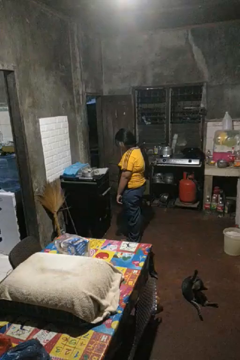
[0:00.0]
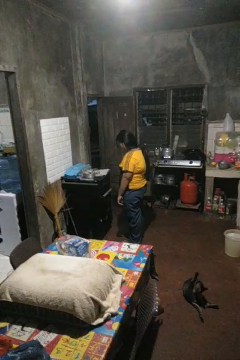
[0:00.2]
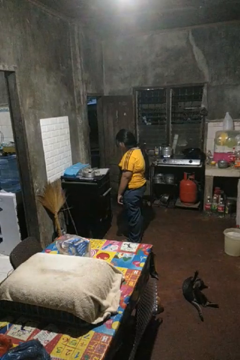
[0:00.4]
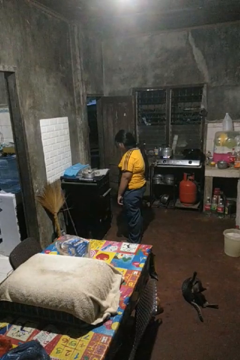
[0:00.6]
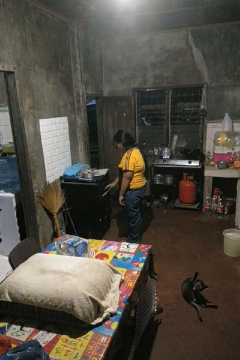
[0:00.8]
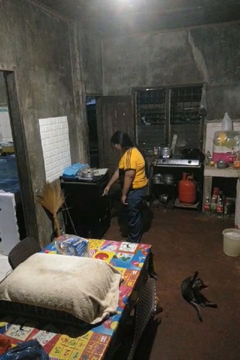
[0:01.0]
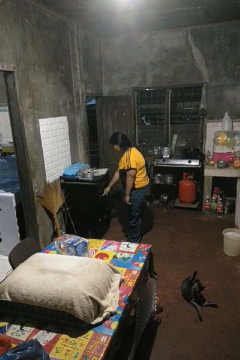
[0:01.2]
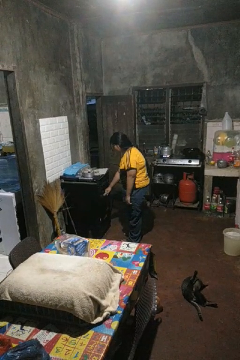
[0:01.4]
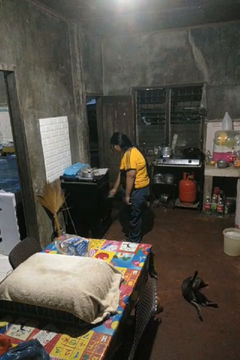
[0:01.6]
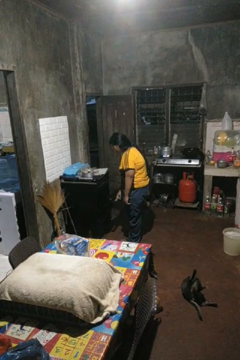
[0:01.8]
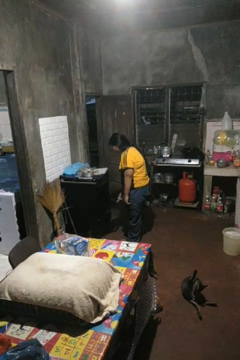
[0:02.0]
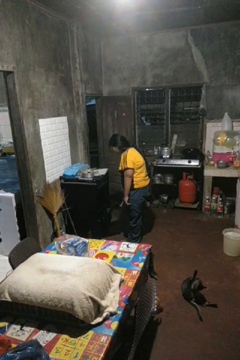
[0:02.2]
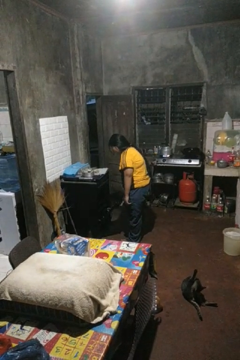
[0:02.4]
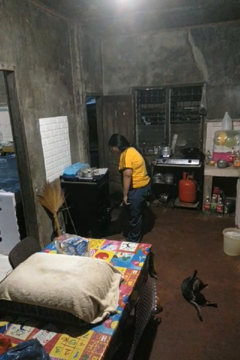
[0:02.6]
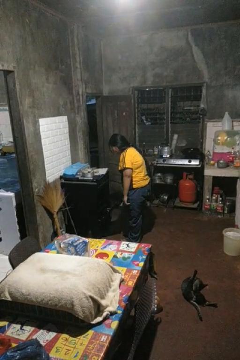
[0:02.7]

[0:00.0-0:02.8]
person opens oven door

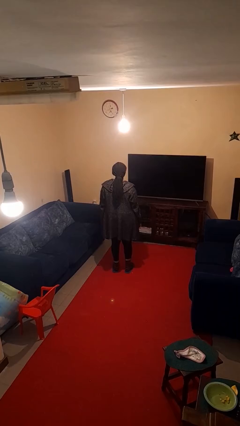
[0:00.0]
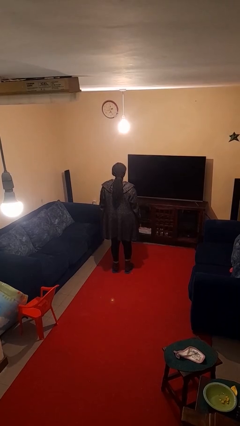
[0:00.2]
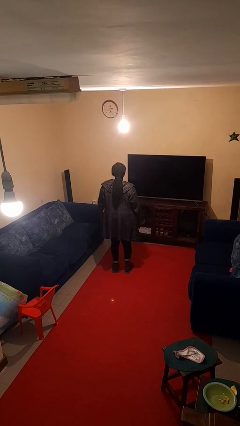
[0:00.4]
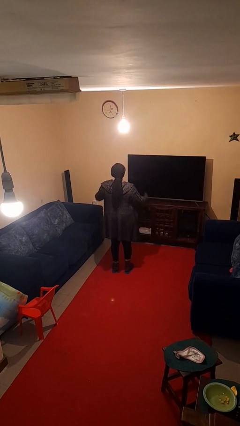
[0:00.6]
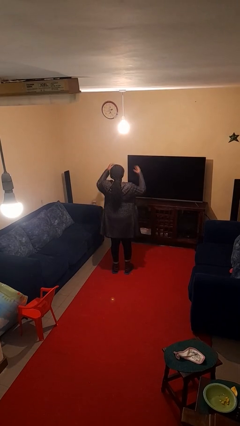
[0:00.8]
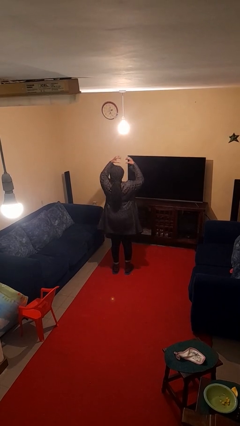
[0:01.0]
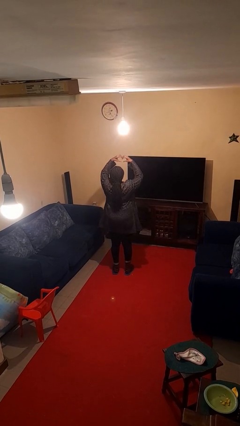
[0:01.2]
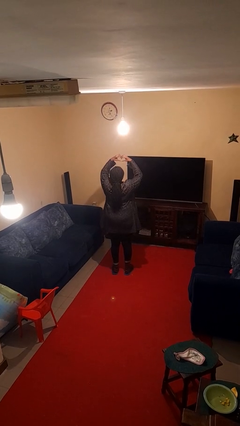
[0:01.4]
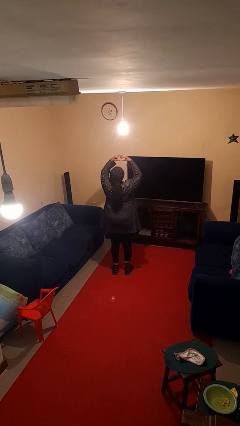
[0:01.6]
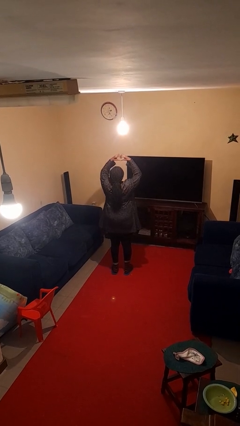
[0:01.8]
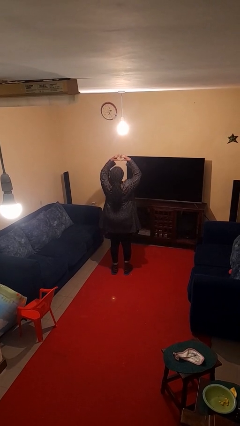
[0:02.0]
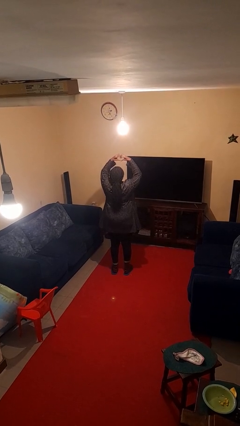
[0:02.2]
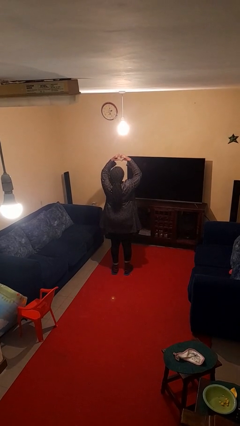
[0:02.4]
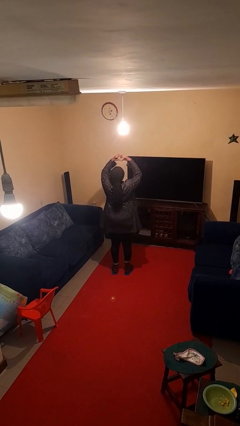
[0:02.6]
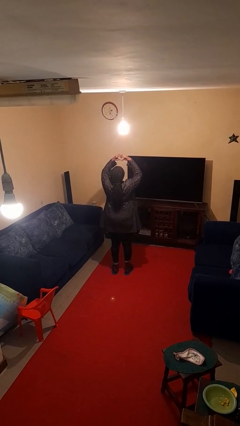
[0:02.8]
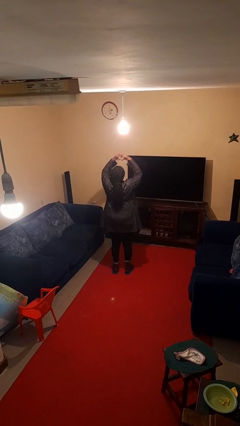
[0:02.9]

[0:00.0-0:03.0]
person gestures heart

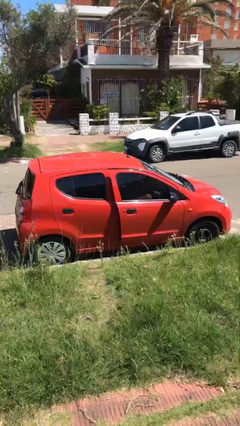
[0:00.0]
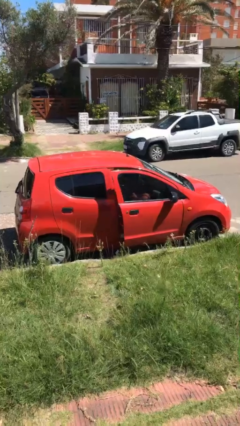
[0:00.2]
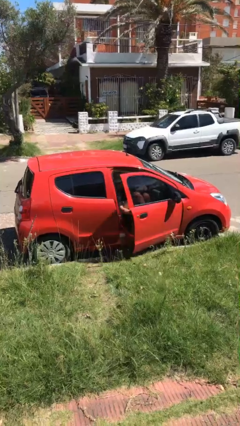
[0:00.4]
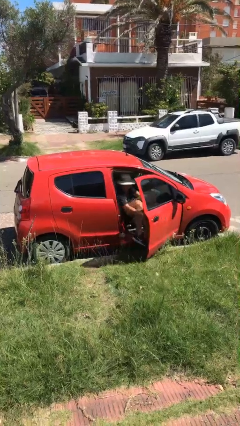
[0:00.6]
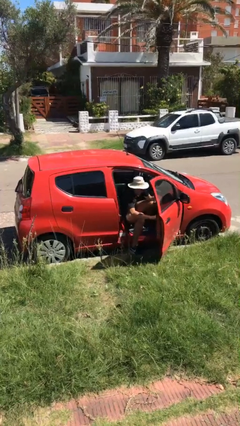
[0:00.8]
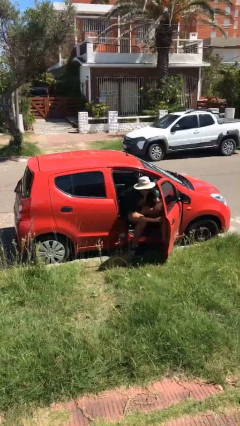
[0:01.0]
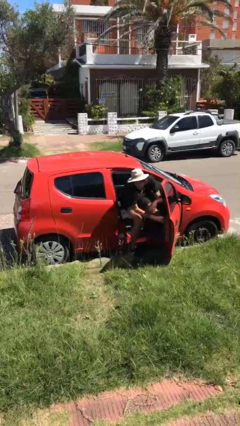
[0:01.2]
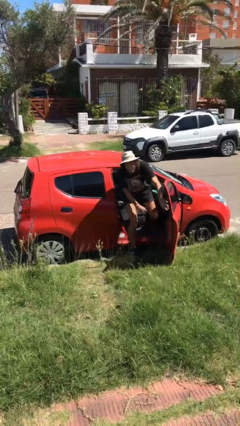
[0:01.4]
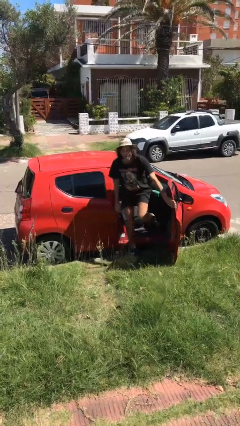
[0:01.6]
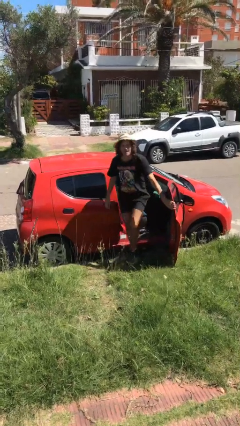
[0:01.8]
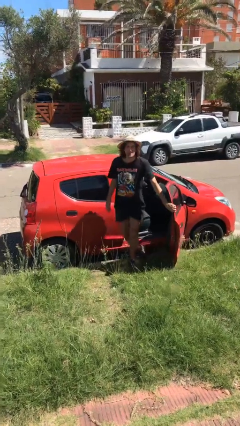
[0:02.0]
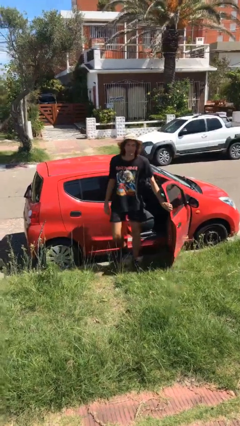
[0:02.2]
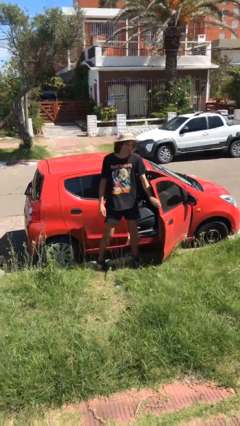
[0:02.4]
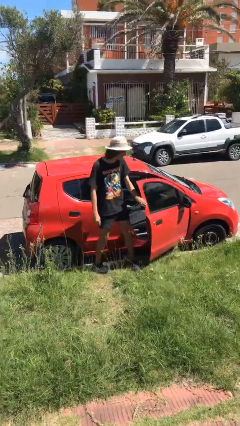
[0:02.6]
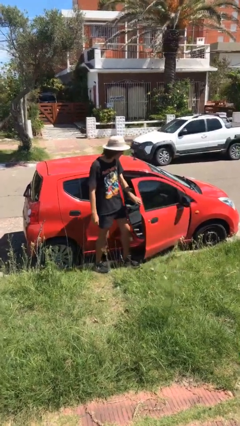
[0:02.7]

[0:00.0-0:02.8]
car drops off person

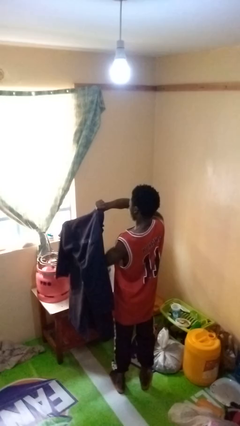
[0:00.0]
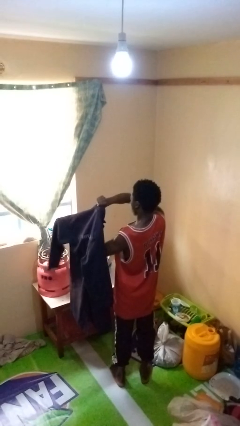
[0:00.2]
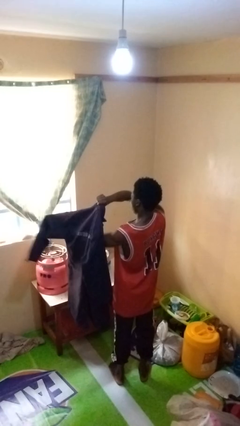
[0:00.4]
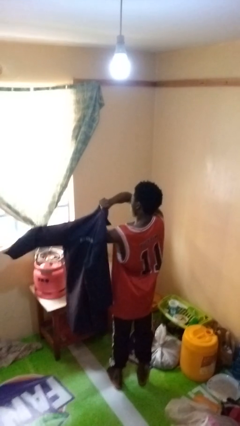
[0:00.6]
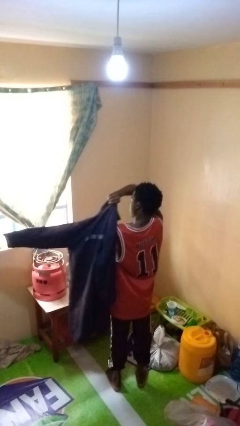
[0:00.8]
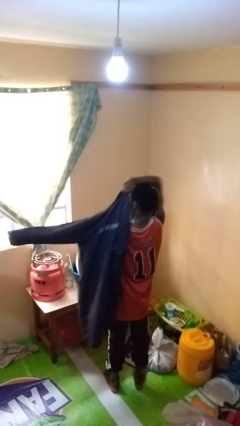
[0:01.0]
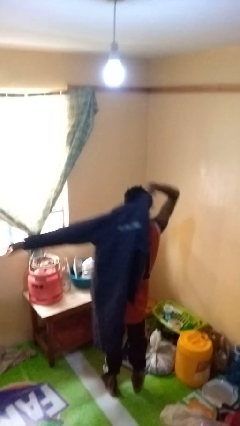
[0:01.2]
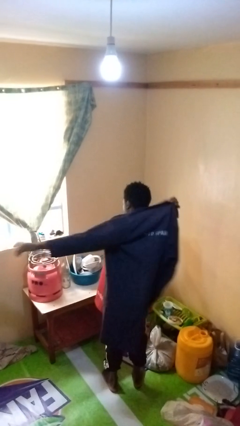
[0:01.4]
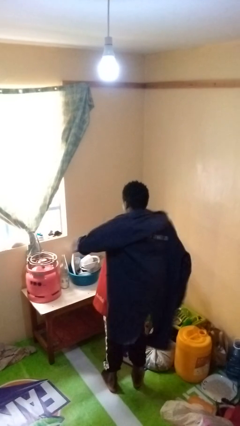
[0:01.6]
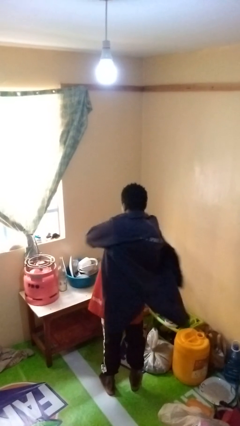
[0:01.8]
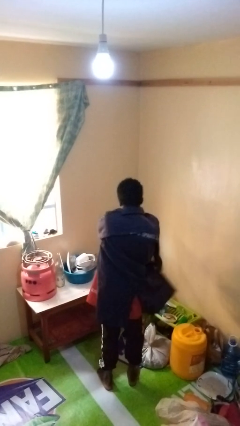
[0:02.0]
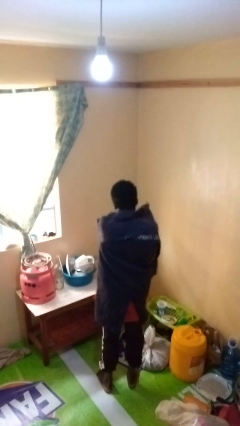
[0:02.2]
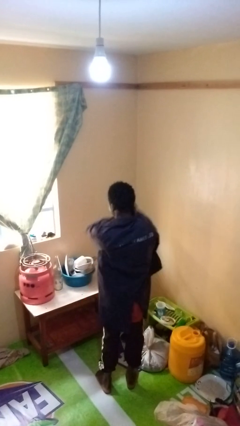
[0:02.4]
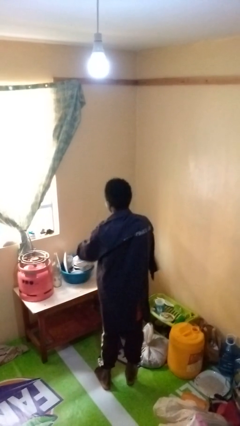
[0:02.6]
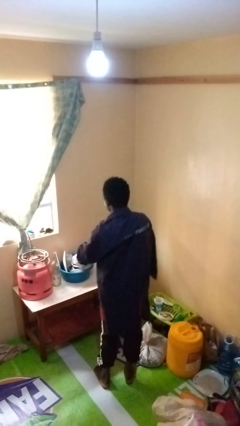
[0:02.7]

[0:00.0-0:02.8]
person puts on apron

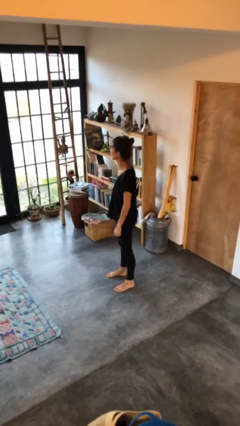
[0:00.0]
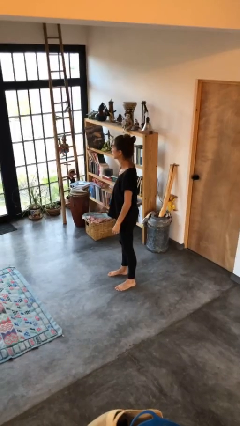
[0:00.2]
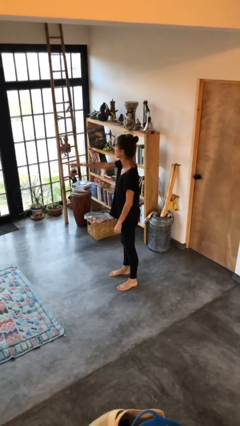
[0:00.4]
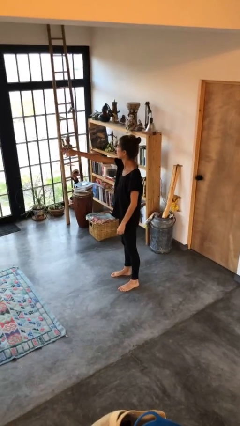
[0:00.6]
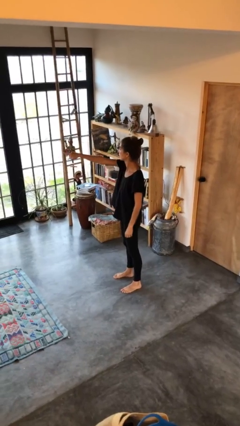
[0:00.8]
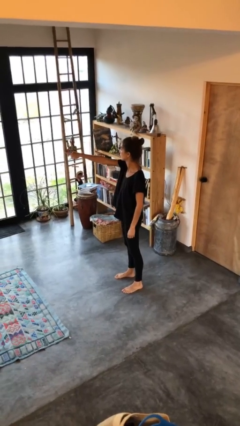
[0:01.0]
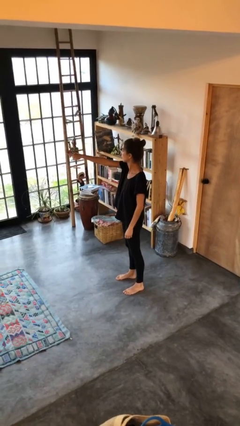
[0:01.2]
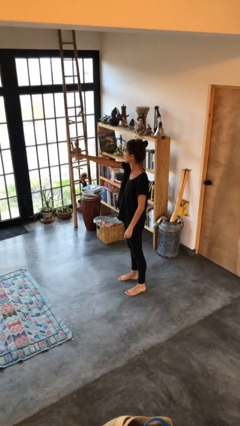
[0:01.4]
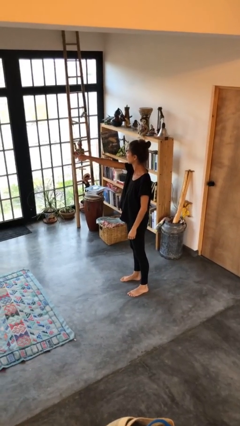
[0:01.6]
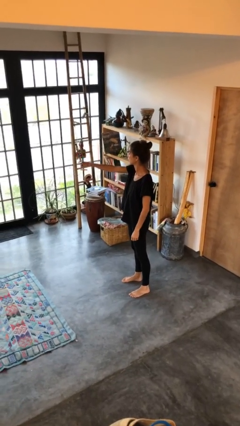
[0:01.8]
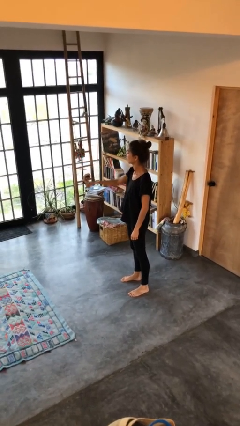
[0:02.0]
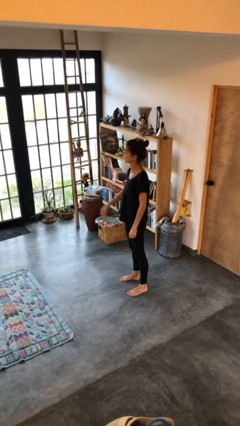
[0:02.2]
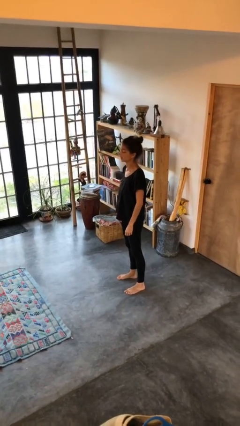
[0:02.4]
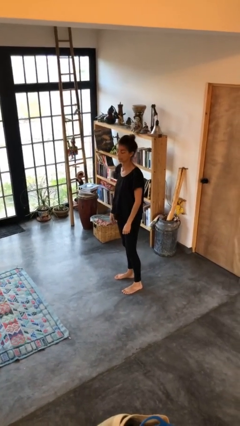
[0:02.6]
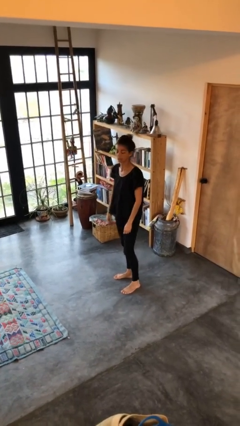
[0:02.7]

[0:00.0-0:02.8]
person points at person

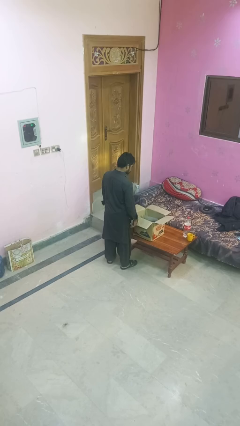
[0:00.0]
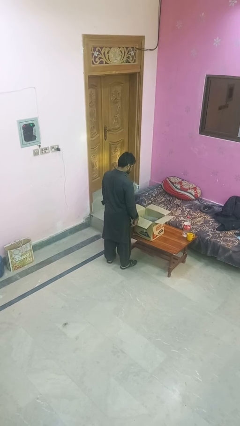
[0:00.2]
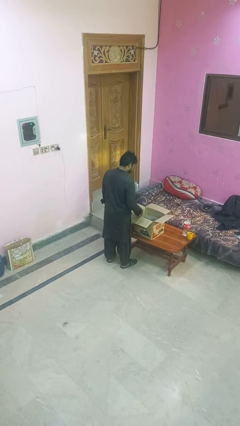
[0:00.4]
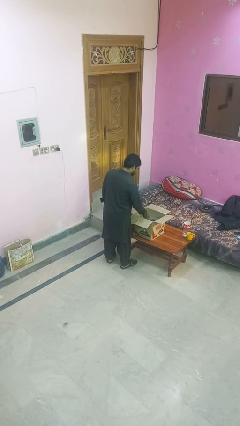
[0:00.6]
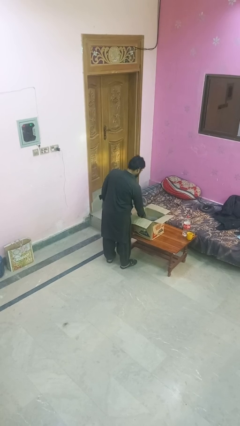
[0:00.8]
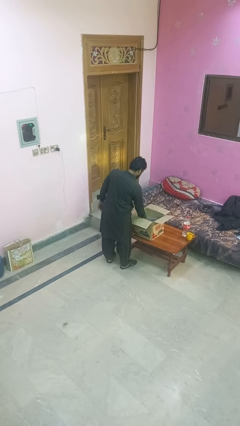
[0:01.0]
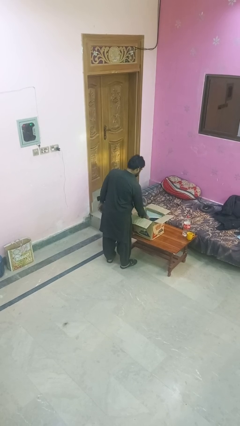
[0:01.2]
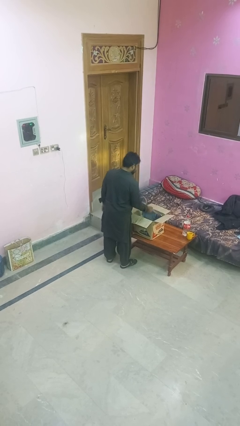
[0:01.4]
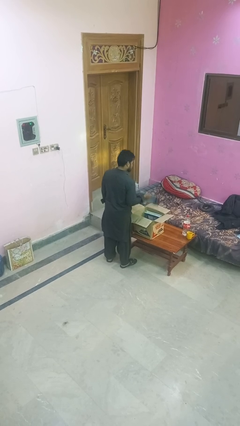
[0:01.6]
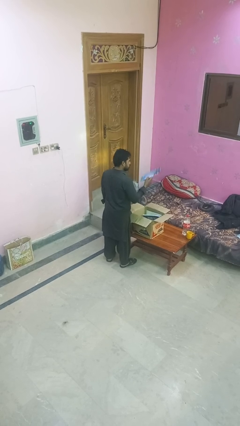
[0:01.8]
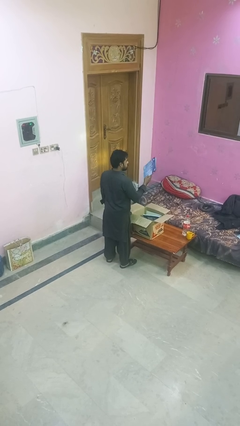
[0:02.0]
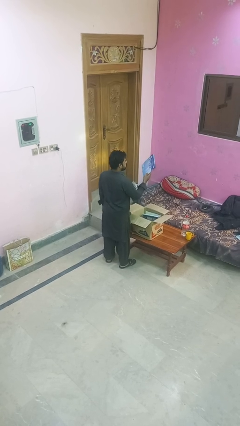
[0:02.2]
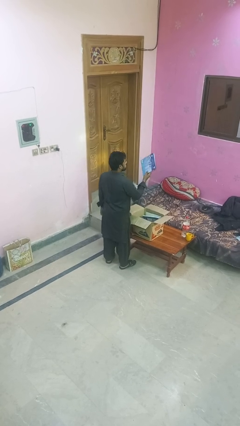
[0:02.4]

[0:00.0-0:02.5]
person takes object from box

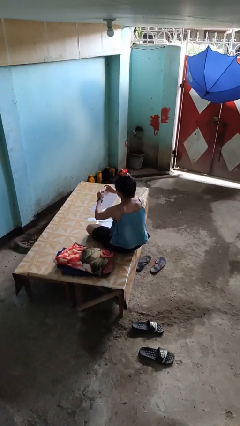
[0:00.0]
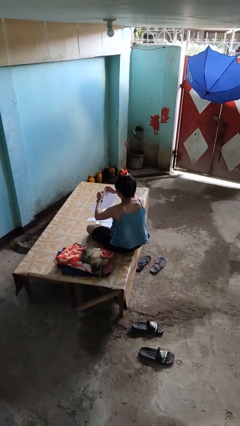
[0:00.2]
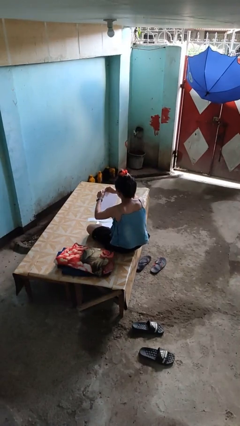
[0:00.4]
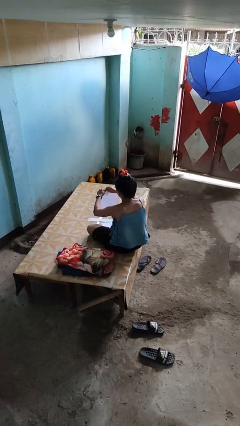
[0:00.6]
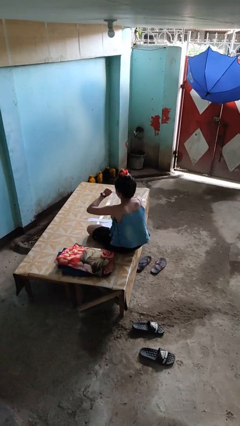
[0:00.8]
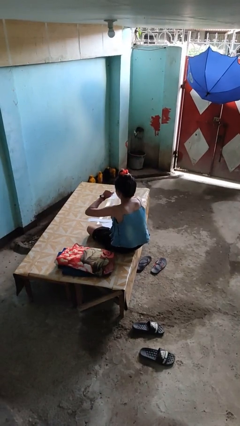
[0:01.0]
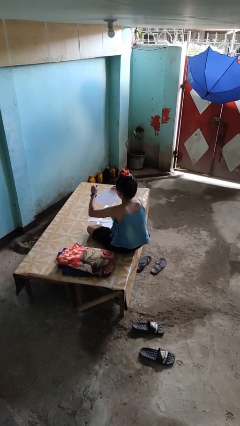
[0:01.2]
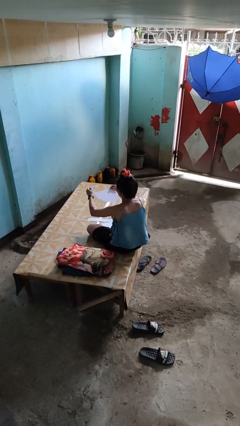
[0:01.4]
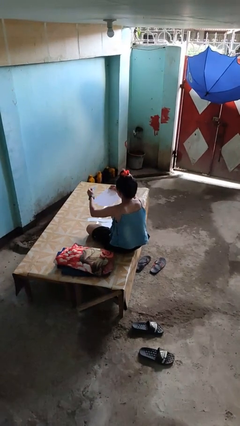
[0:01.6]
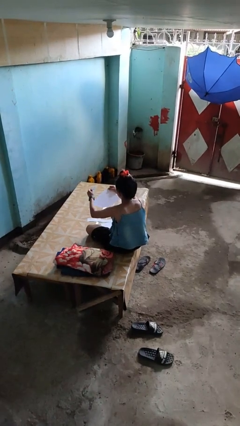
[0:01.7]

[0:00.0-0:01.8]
person tears paper
